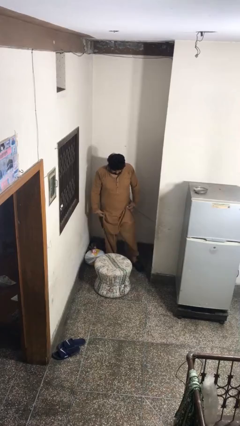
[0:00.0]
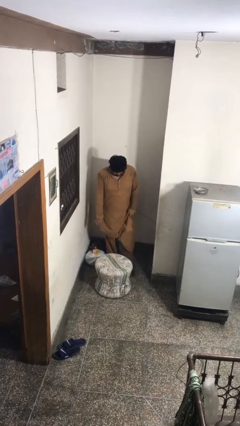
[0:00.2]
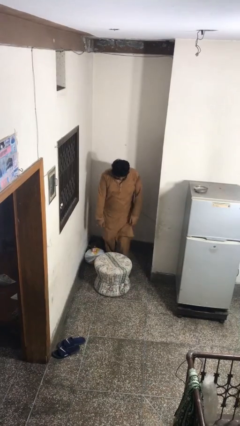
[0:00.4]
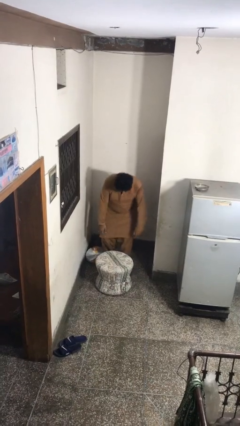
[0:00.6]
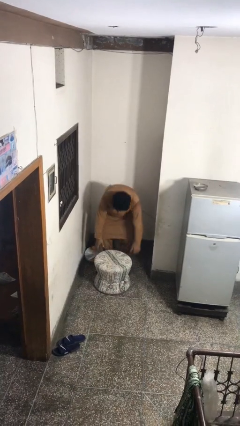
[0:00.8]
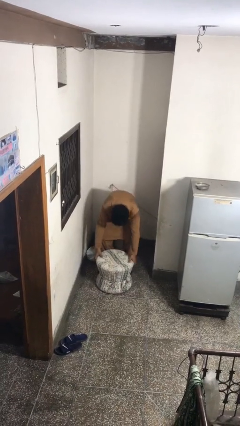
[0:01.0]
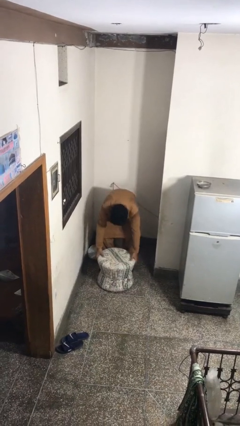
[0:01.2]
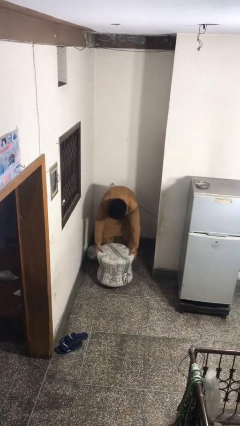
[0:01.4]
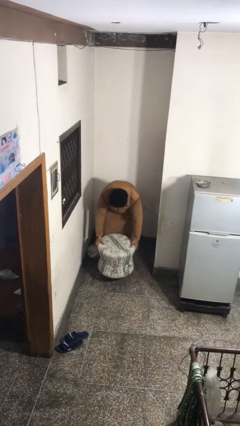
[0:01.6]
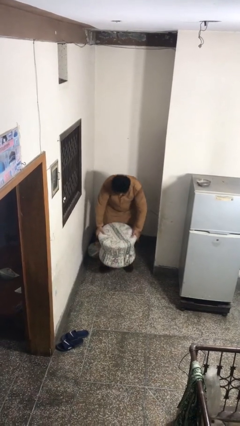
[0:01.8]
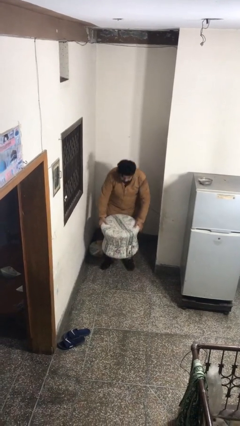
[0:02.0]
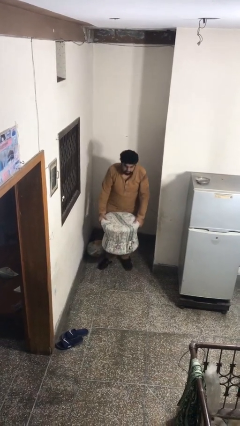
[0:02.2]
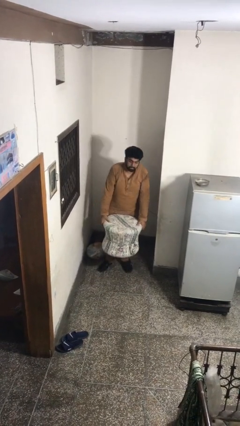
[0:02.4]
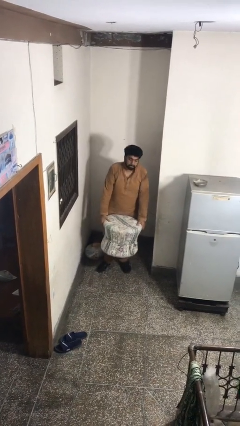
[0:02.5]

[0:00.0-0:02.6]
person picks up object from floor

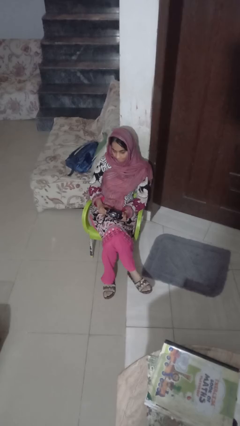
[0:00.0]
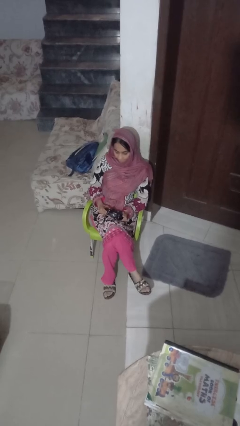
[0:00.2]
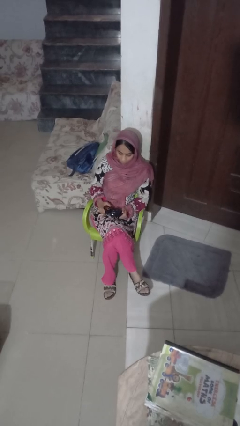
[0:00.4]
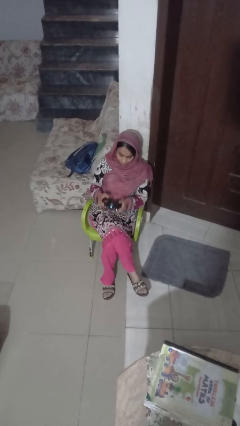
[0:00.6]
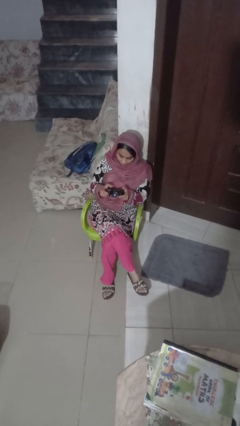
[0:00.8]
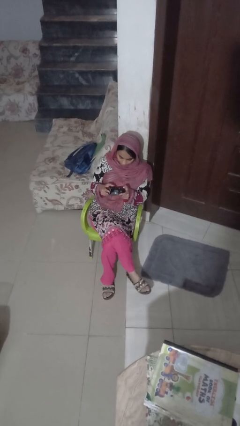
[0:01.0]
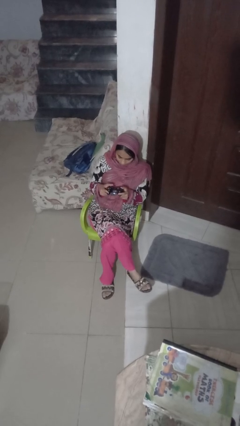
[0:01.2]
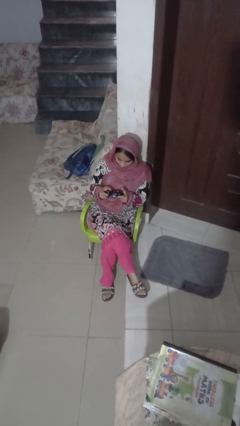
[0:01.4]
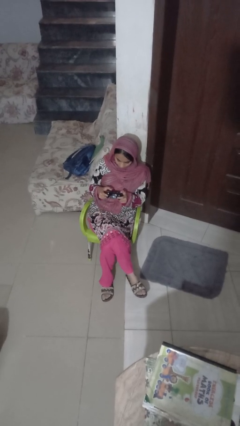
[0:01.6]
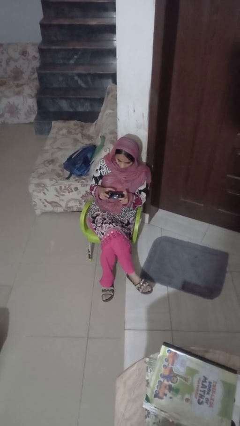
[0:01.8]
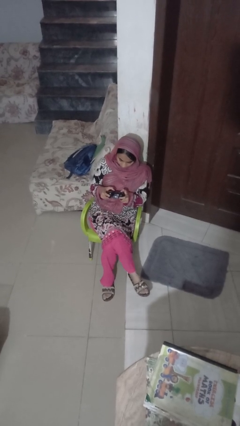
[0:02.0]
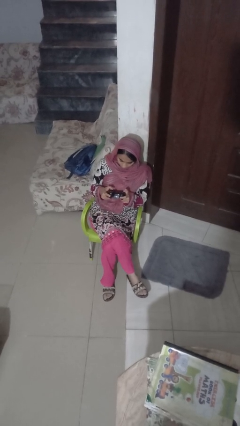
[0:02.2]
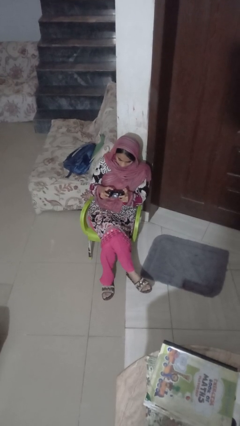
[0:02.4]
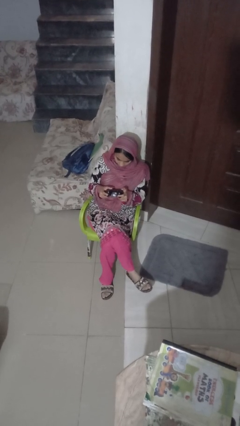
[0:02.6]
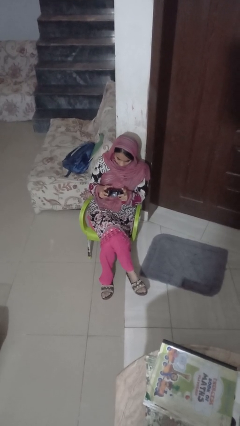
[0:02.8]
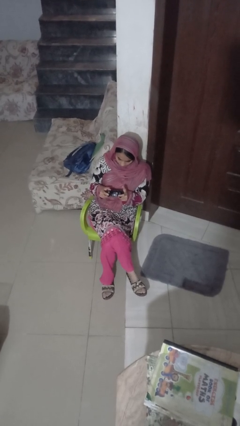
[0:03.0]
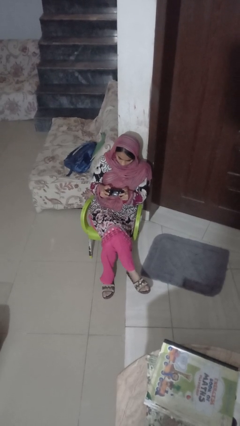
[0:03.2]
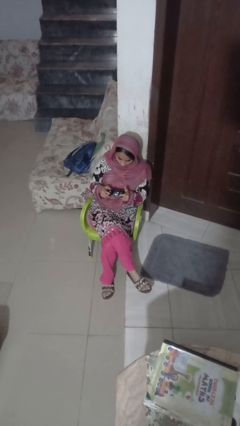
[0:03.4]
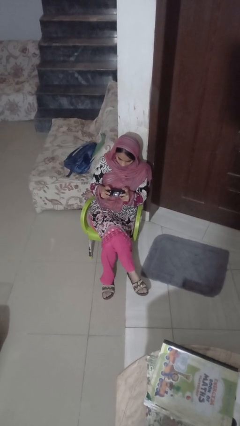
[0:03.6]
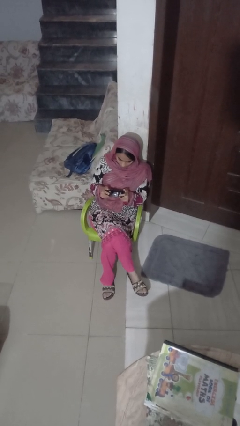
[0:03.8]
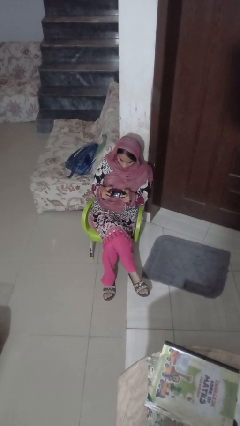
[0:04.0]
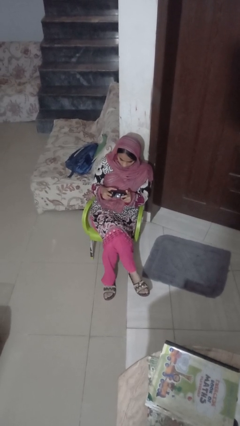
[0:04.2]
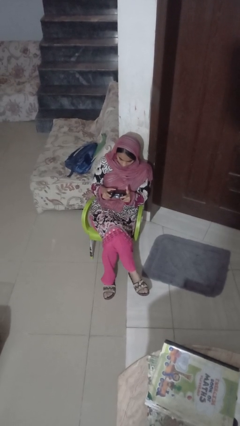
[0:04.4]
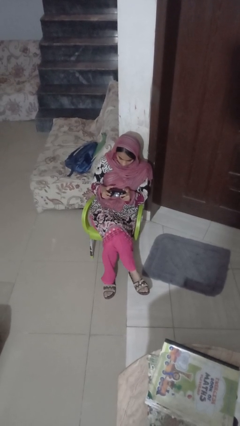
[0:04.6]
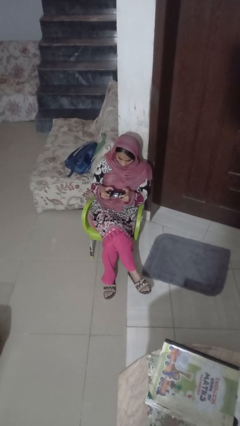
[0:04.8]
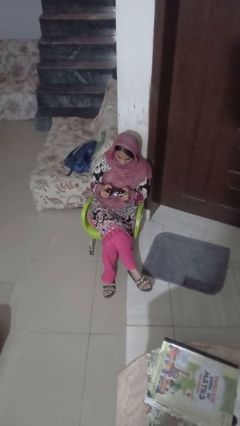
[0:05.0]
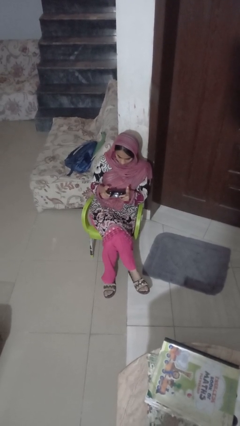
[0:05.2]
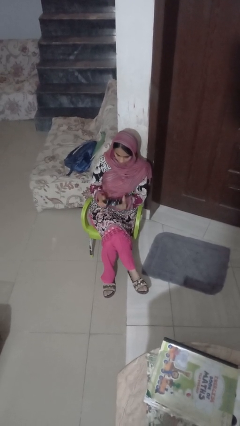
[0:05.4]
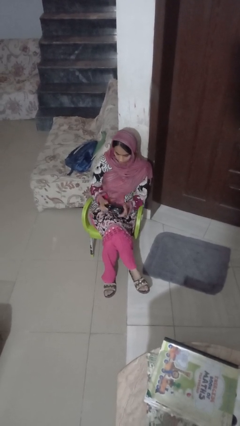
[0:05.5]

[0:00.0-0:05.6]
person interacts with handheld game

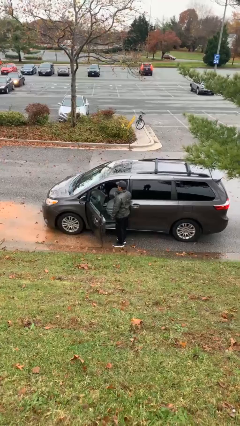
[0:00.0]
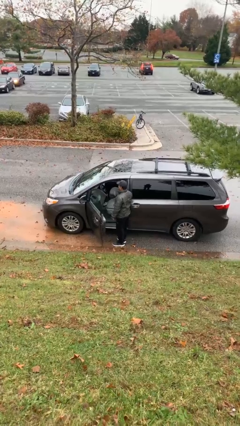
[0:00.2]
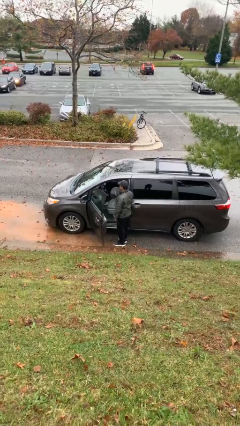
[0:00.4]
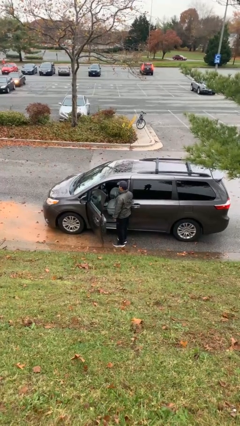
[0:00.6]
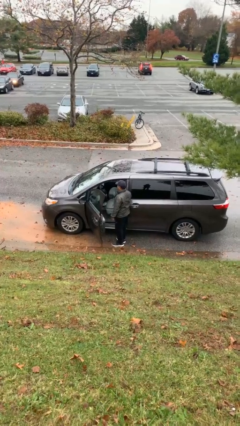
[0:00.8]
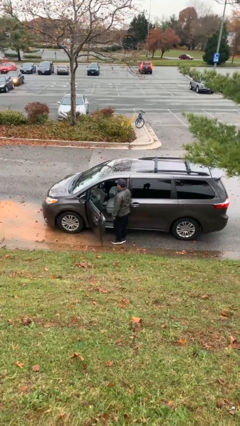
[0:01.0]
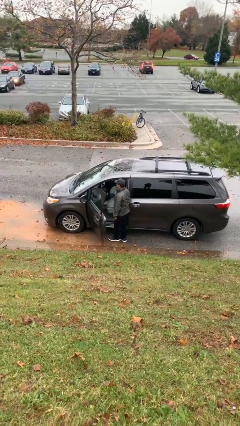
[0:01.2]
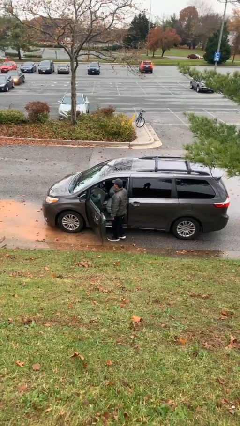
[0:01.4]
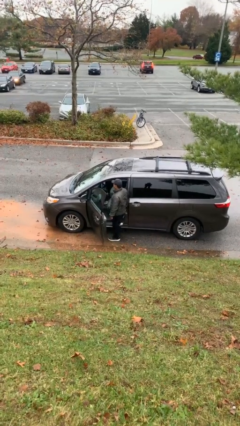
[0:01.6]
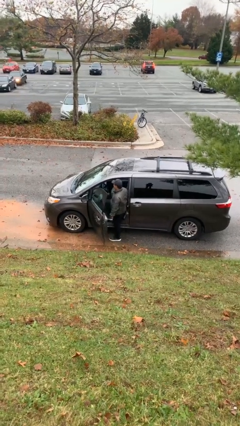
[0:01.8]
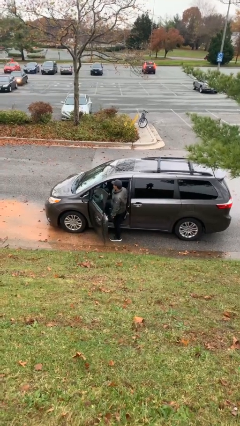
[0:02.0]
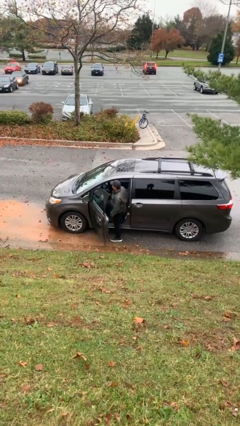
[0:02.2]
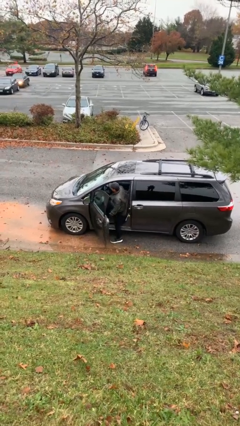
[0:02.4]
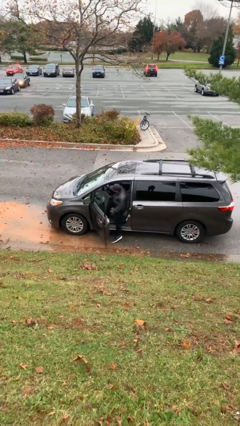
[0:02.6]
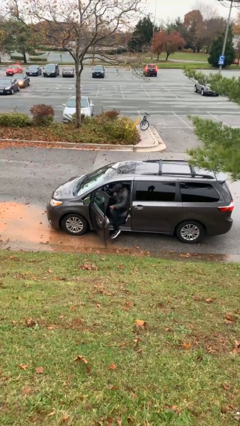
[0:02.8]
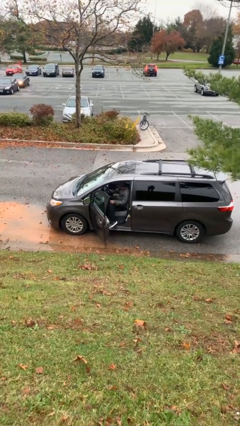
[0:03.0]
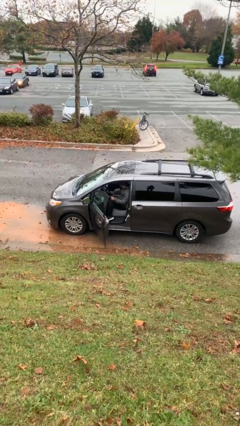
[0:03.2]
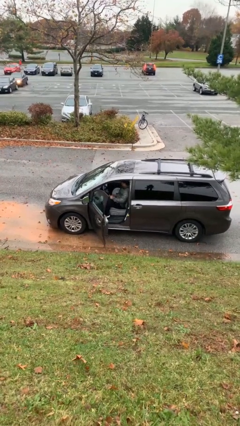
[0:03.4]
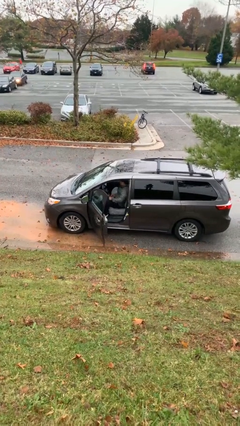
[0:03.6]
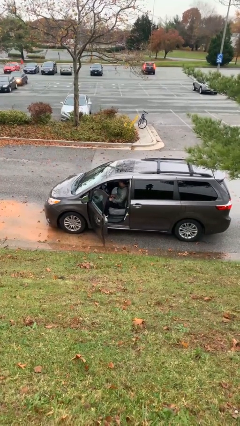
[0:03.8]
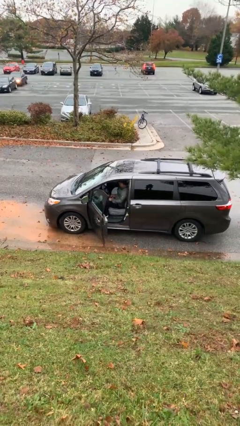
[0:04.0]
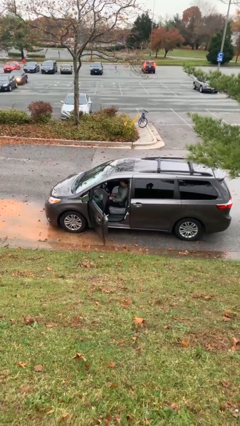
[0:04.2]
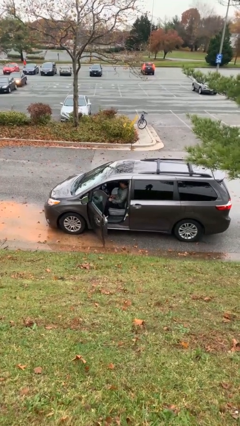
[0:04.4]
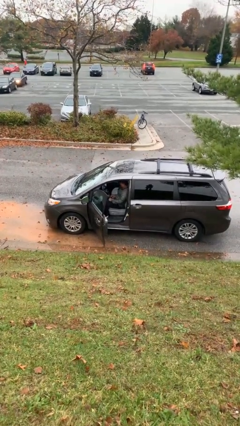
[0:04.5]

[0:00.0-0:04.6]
person enters car

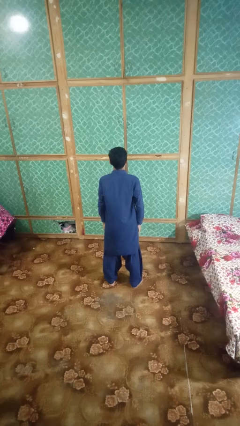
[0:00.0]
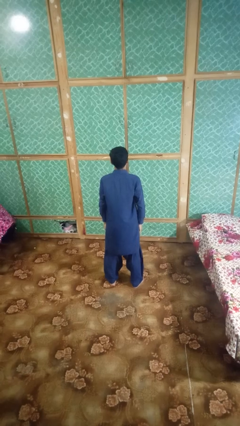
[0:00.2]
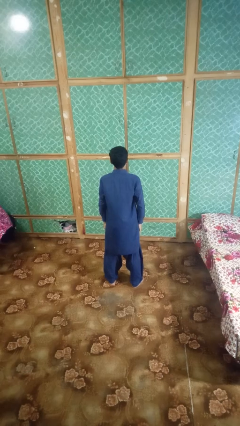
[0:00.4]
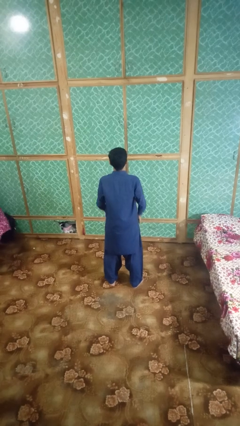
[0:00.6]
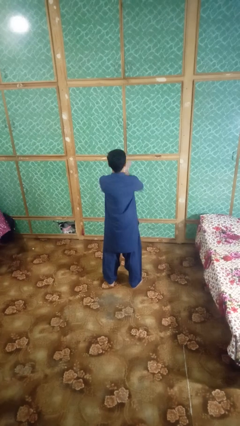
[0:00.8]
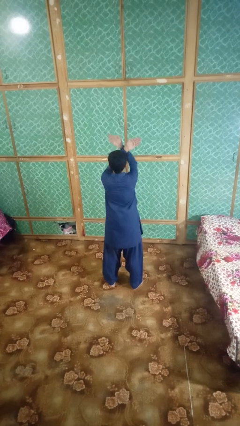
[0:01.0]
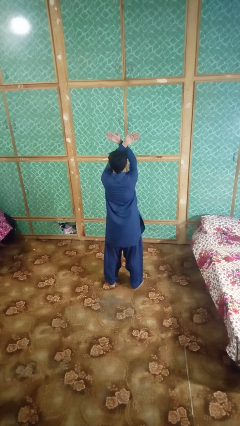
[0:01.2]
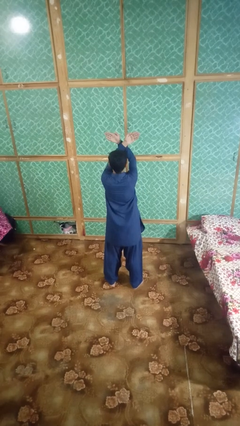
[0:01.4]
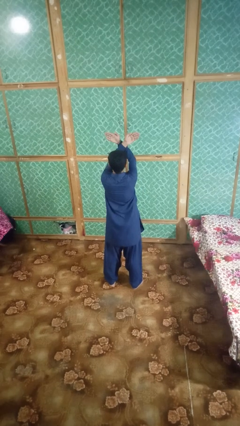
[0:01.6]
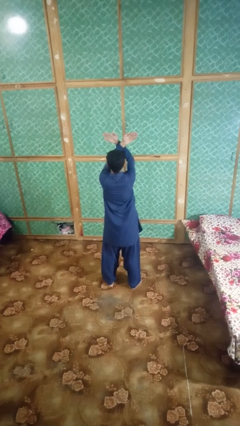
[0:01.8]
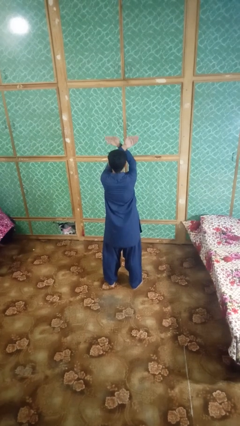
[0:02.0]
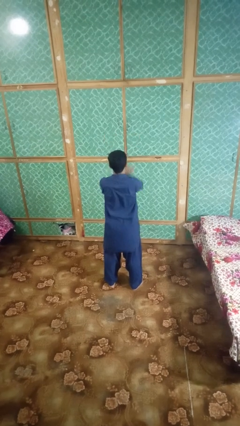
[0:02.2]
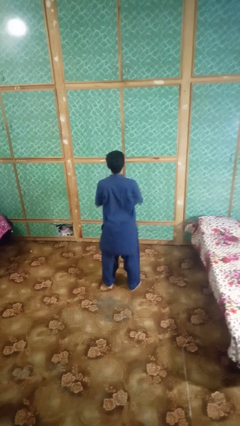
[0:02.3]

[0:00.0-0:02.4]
person gestures arms x

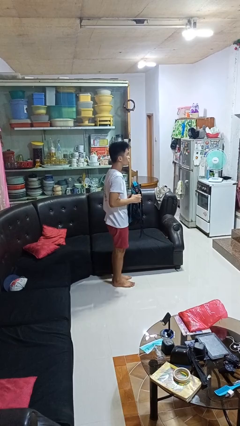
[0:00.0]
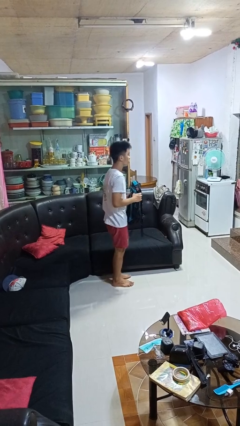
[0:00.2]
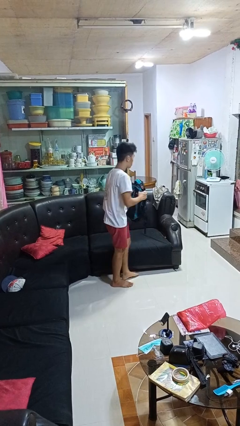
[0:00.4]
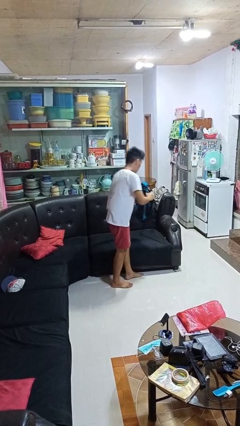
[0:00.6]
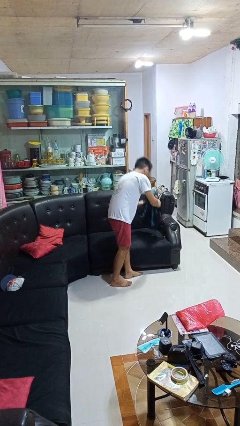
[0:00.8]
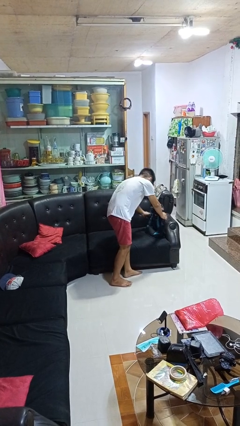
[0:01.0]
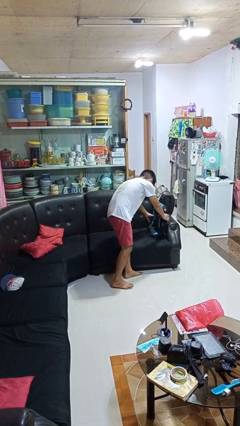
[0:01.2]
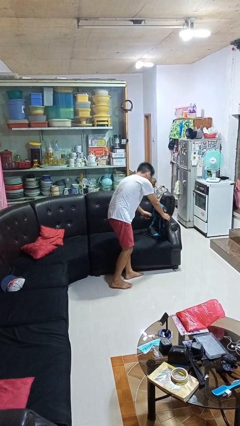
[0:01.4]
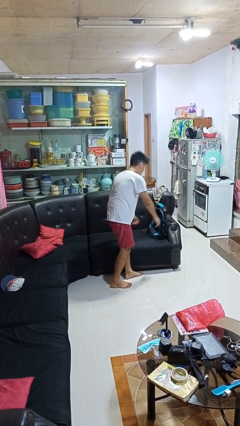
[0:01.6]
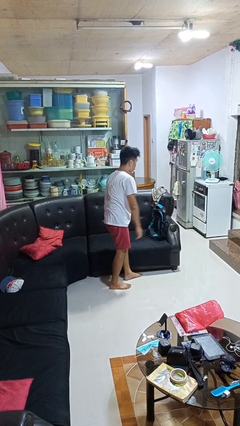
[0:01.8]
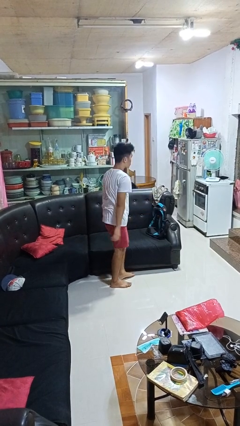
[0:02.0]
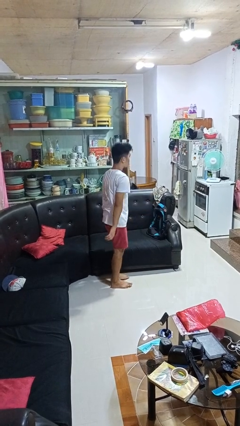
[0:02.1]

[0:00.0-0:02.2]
person puts down object on couch
